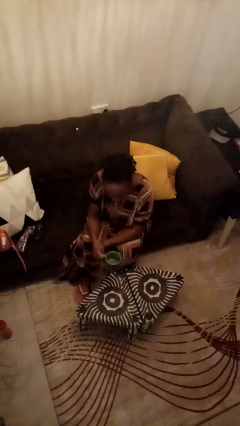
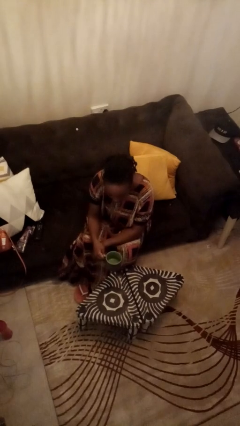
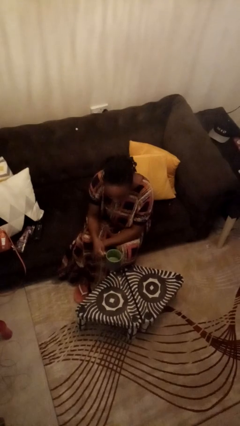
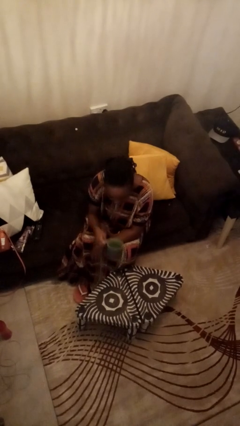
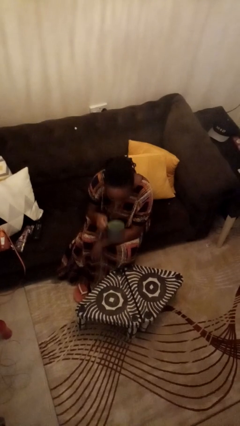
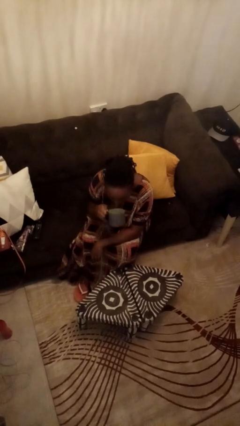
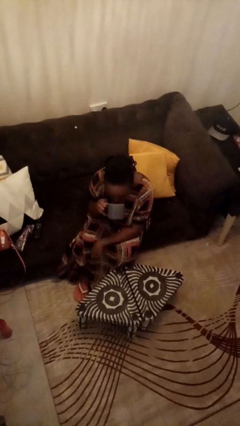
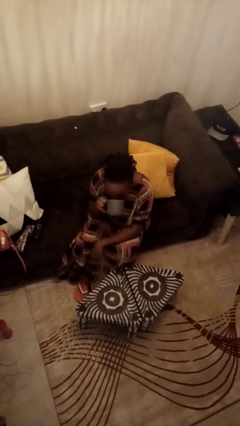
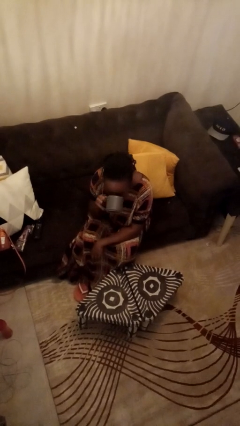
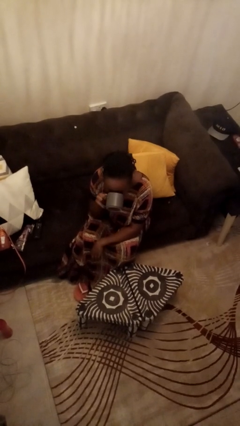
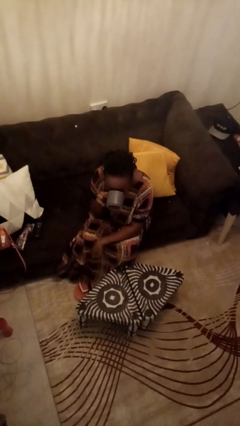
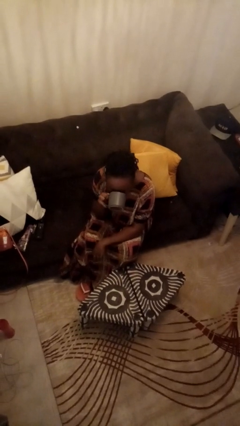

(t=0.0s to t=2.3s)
person drinks from mug

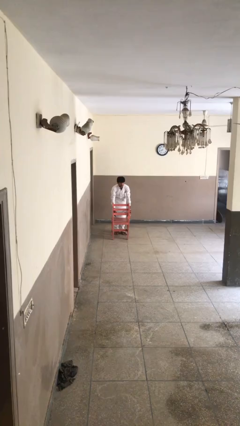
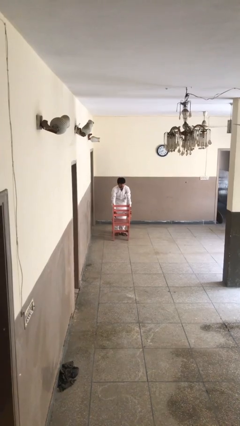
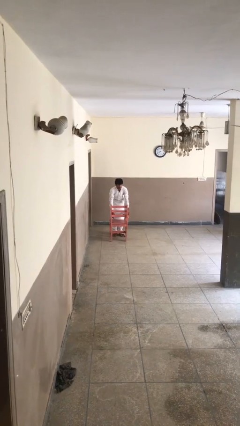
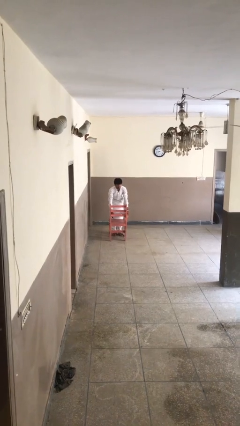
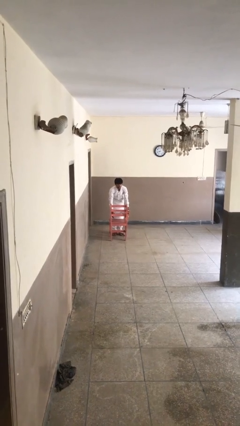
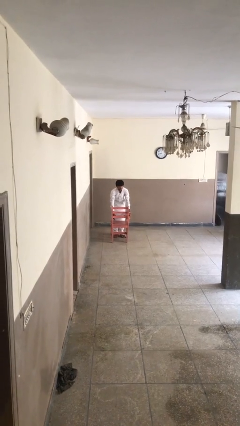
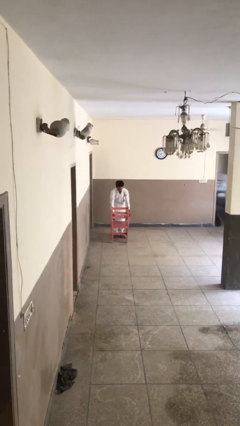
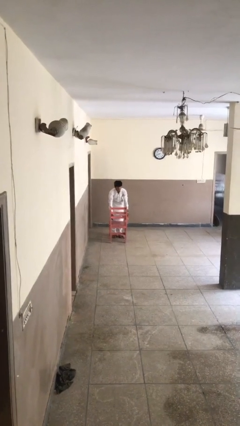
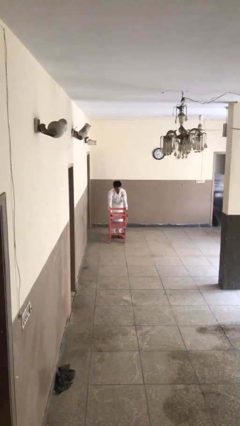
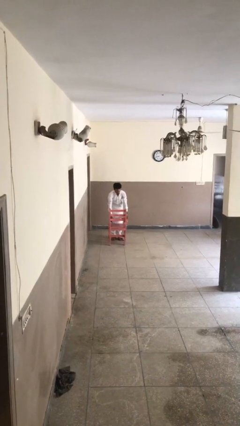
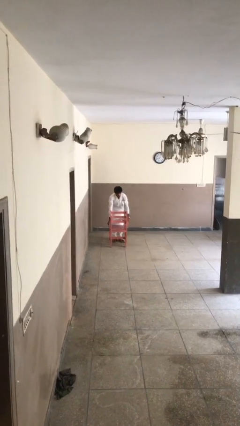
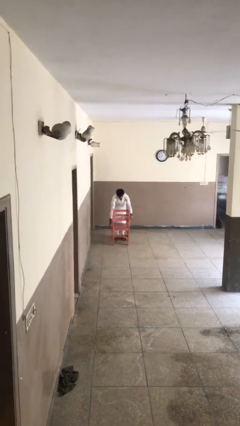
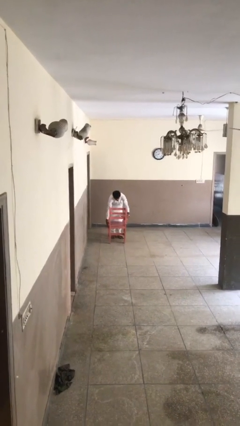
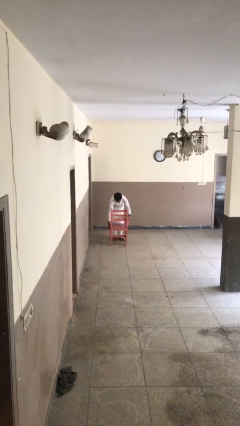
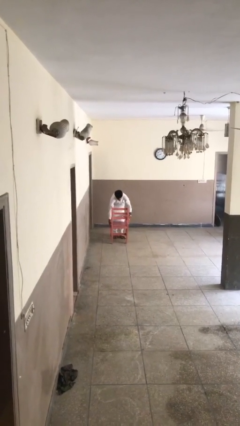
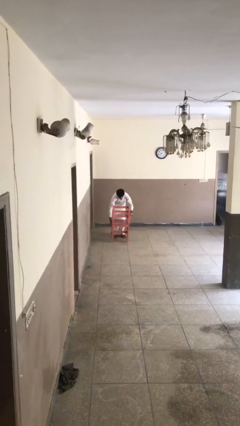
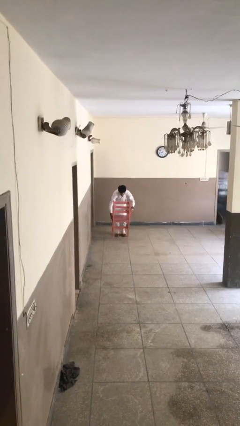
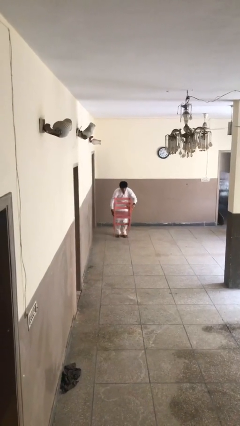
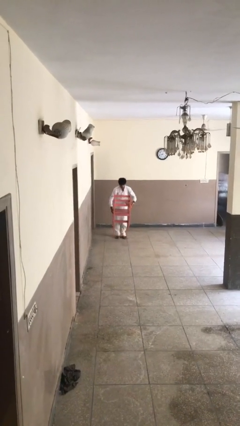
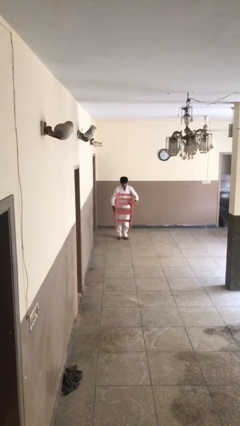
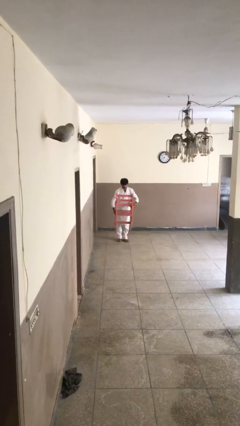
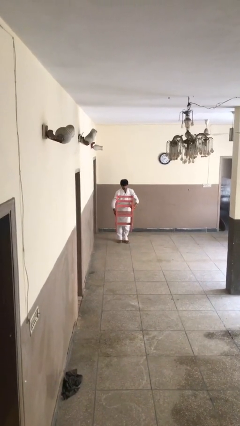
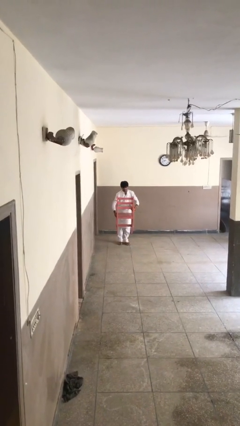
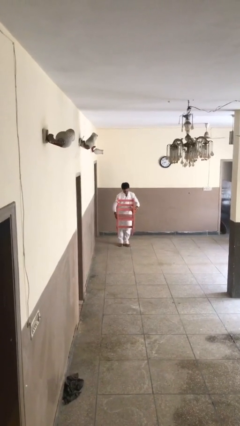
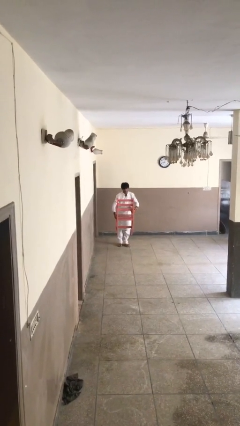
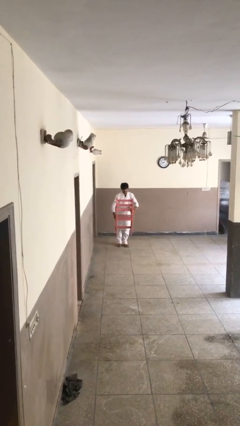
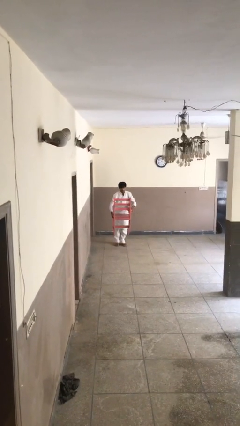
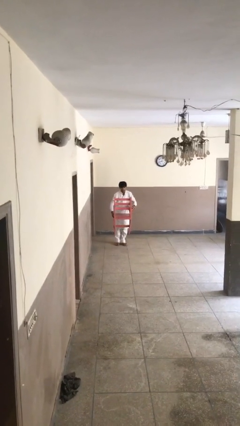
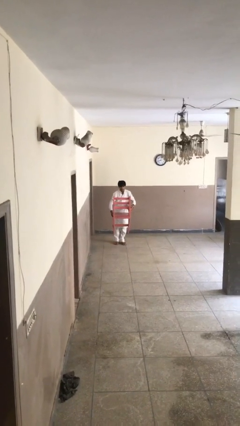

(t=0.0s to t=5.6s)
person picks up object from floor

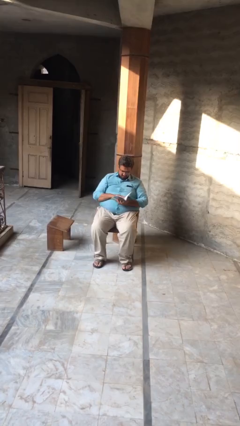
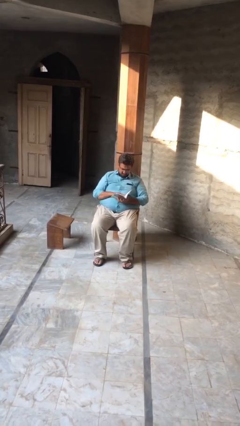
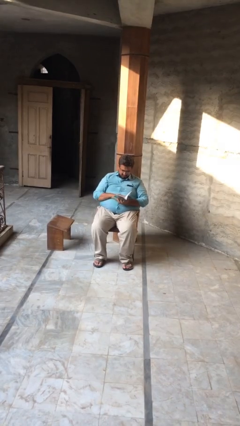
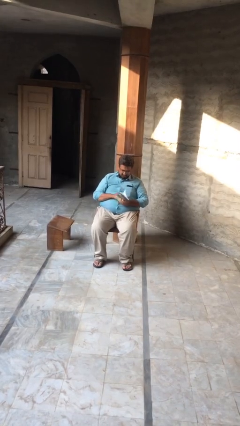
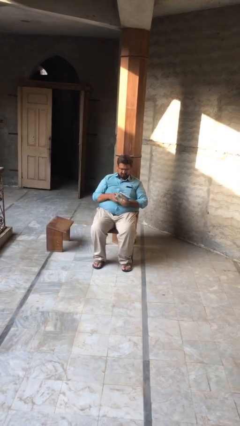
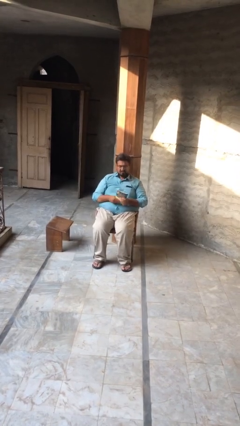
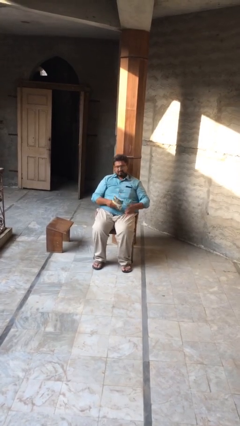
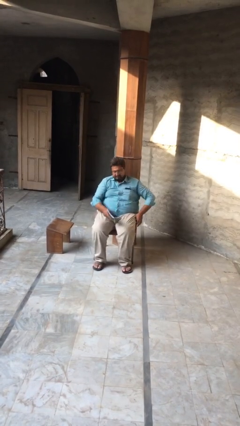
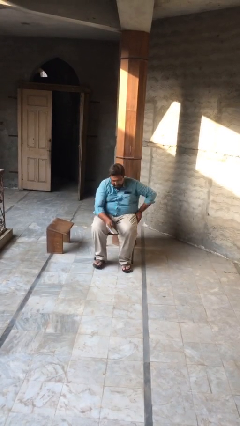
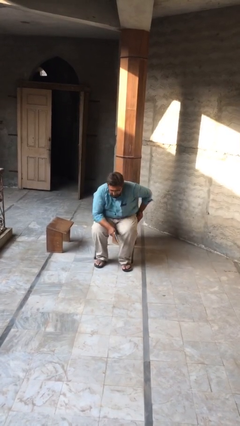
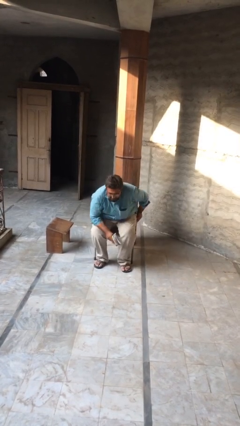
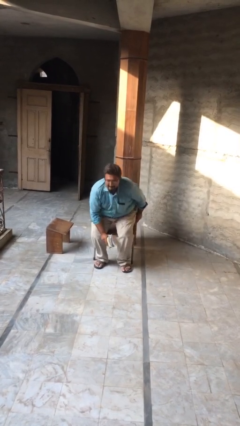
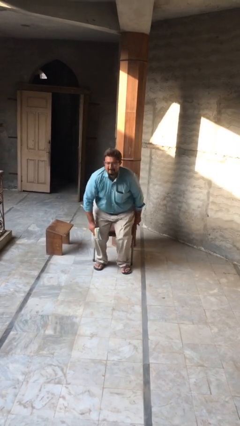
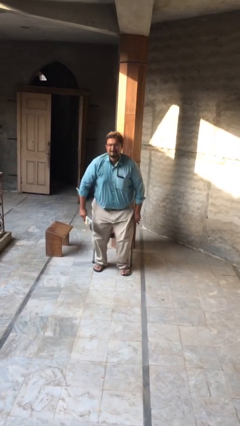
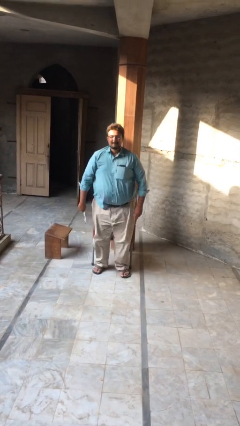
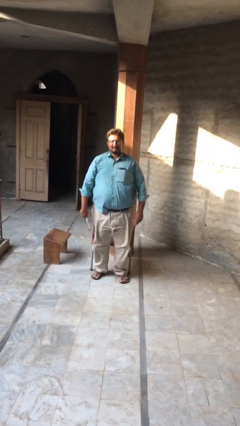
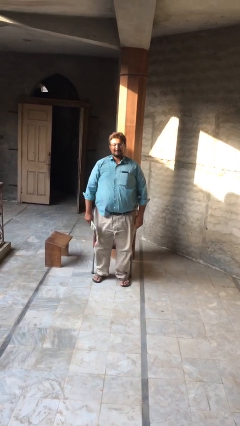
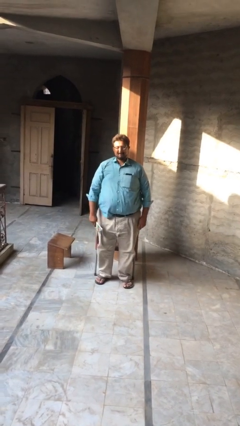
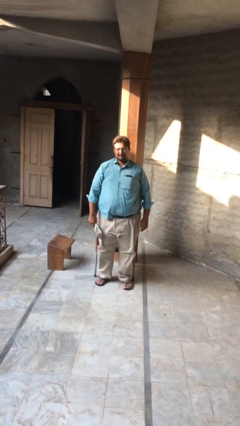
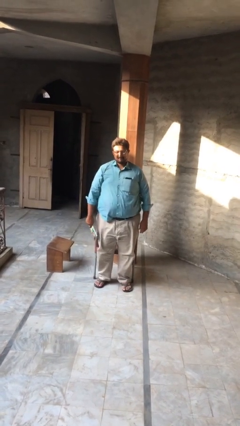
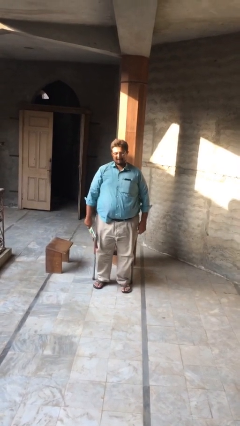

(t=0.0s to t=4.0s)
person stands up

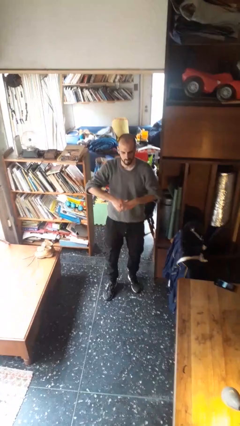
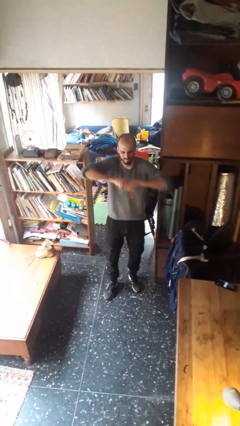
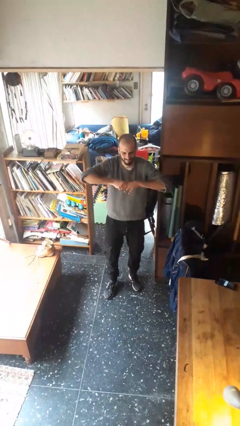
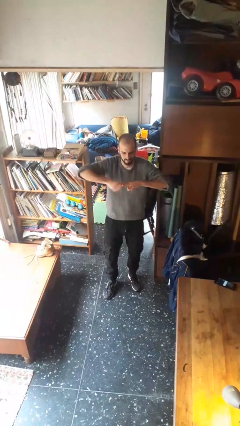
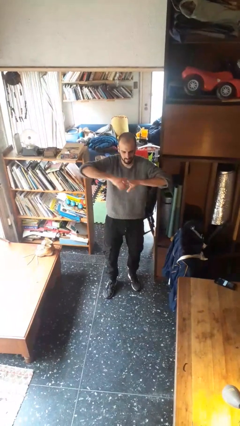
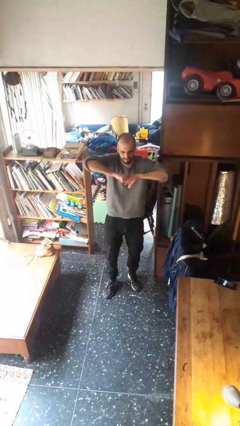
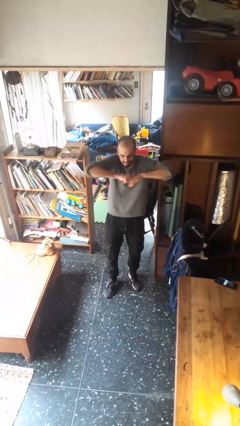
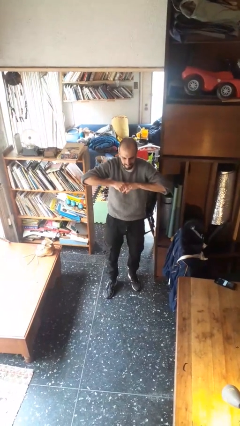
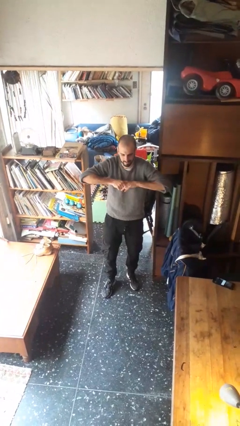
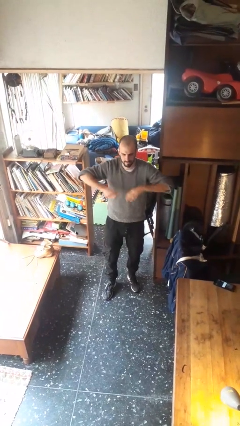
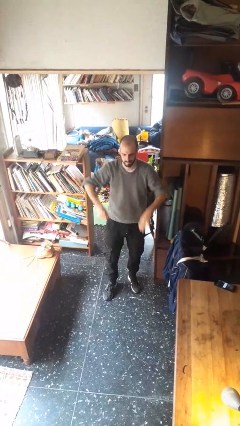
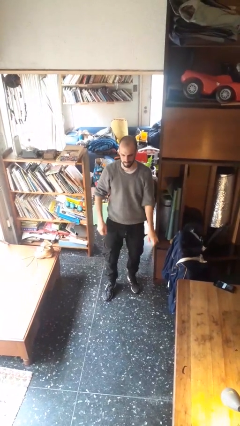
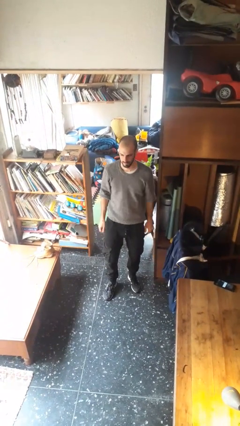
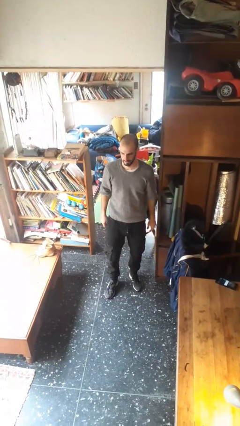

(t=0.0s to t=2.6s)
person cracks knuckles

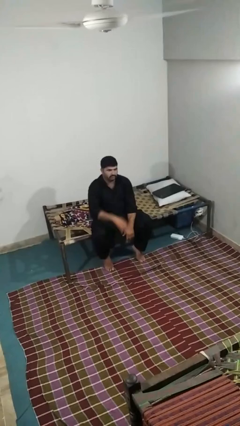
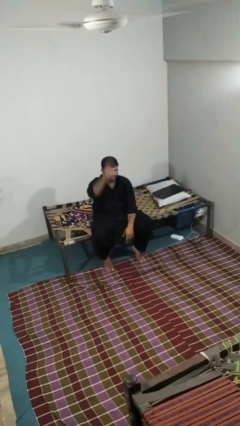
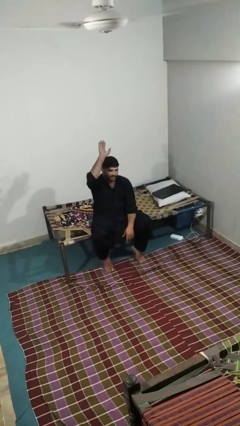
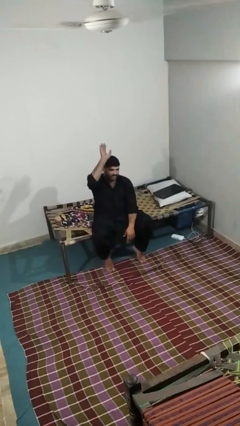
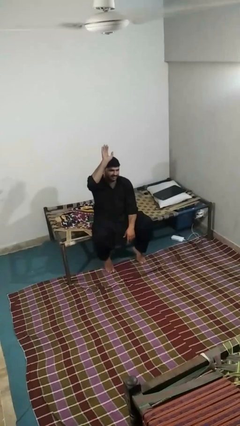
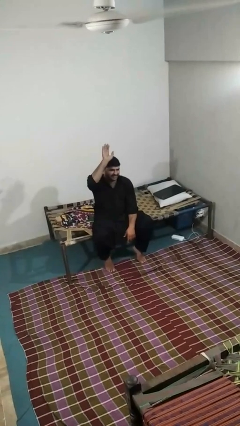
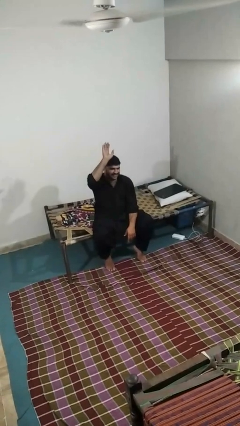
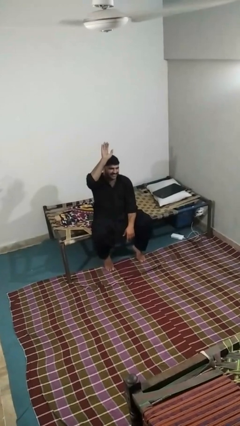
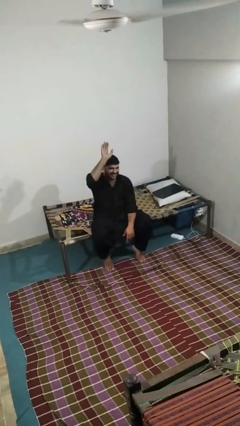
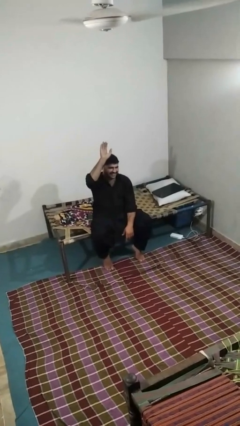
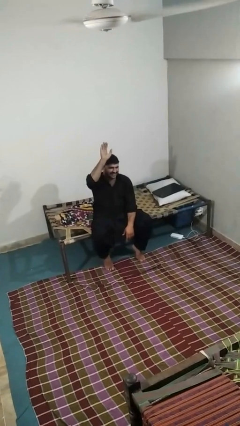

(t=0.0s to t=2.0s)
person gestures raise hand

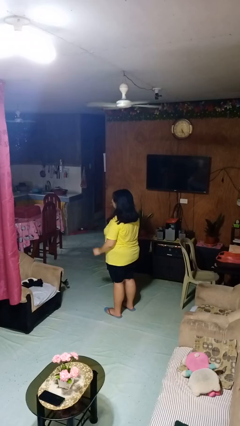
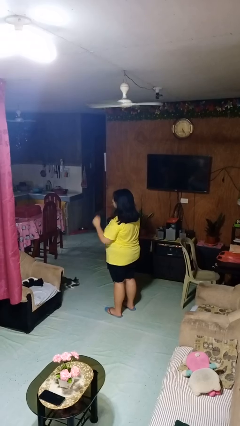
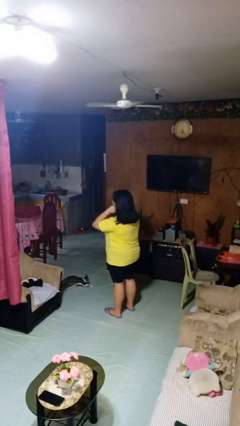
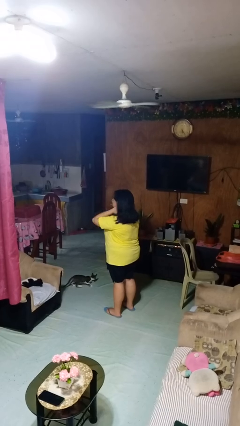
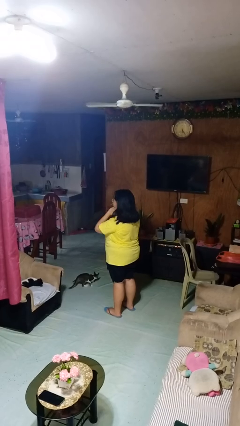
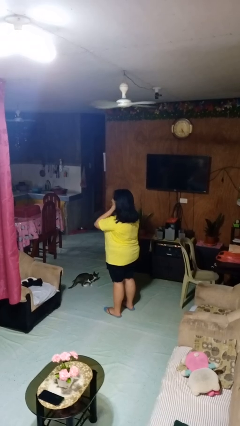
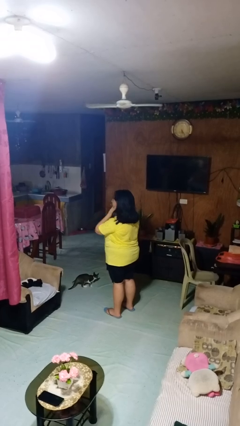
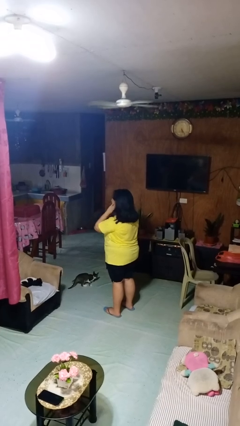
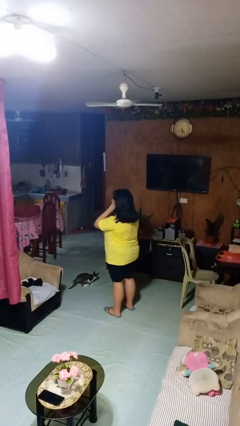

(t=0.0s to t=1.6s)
person scratches face
